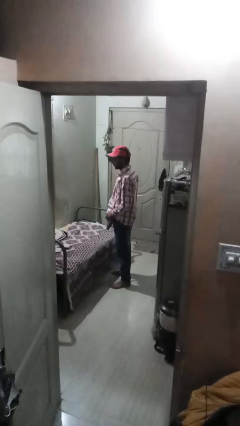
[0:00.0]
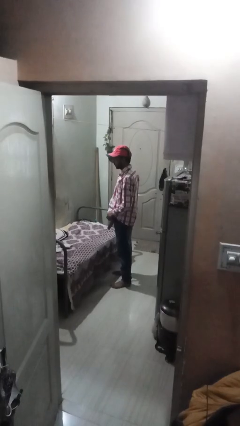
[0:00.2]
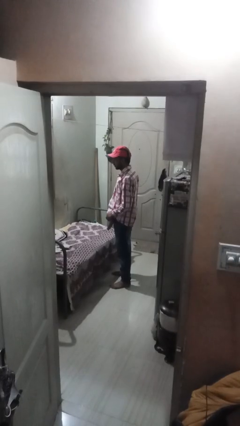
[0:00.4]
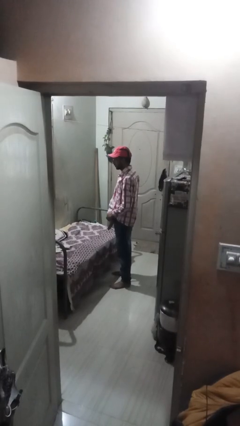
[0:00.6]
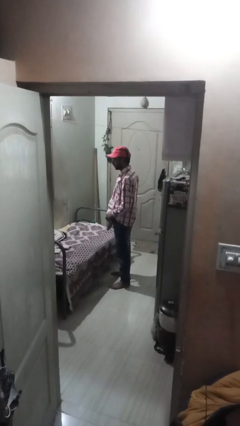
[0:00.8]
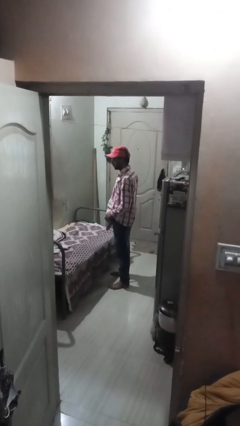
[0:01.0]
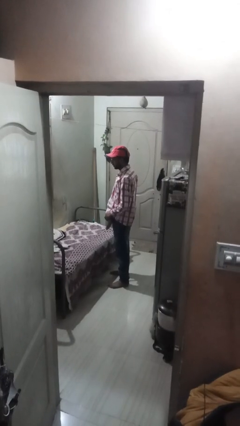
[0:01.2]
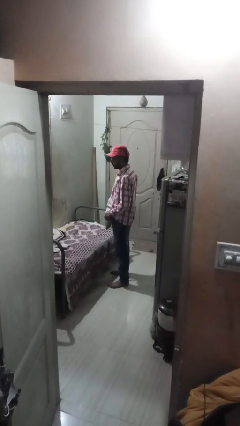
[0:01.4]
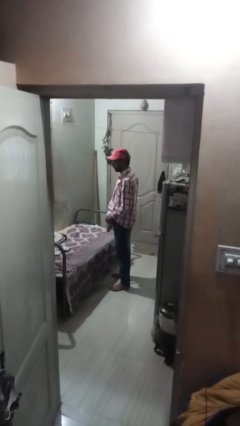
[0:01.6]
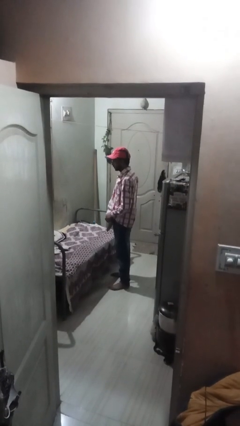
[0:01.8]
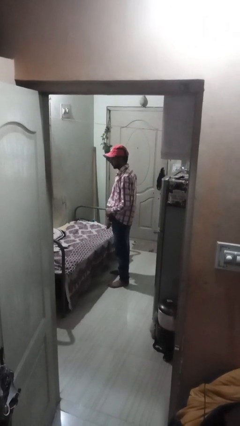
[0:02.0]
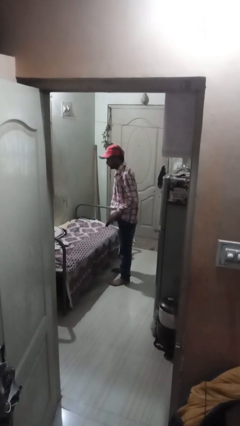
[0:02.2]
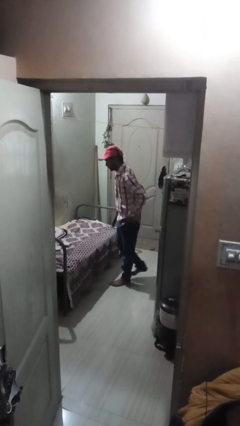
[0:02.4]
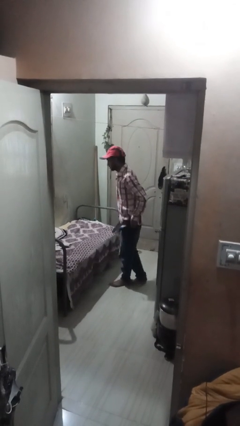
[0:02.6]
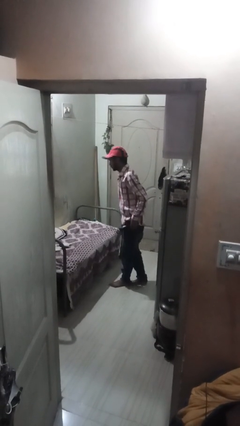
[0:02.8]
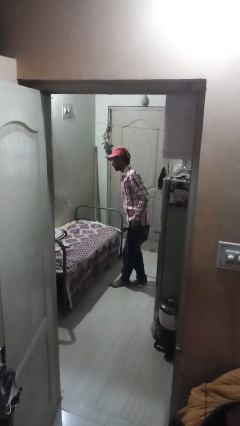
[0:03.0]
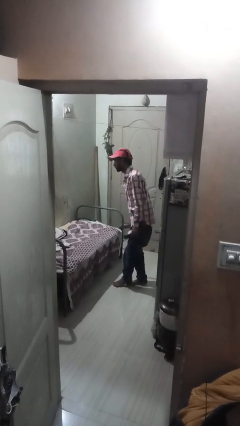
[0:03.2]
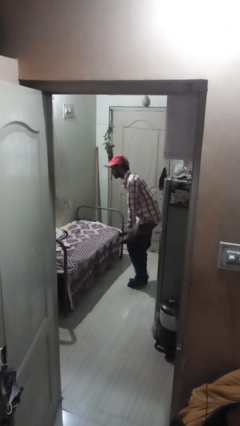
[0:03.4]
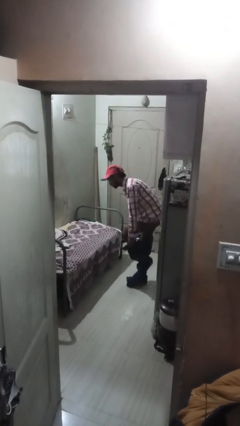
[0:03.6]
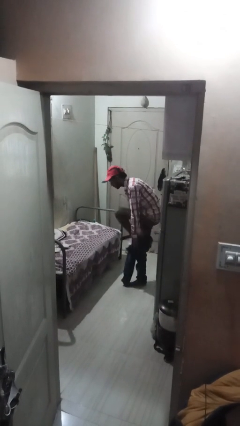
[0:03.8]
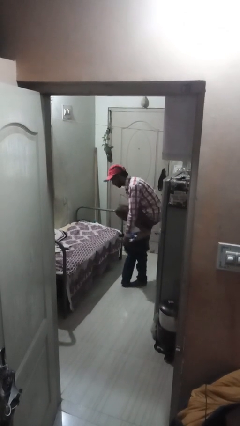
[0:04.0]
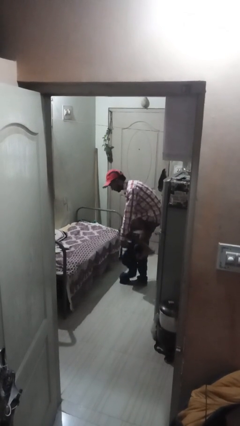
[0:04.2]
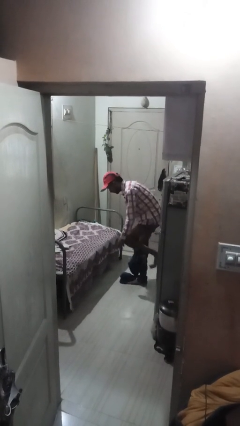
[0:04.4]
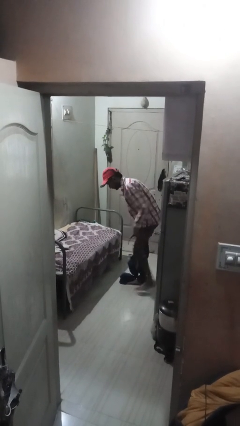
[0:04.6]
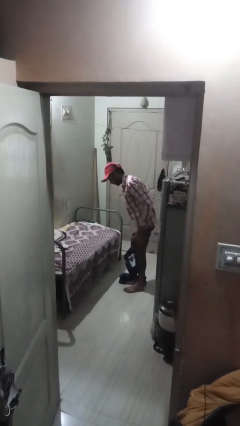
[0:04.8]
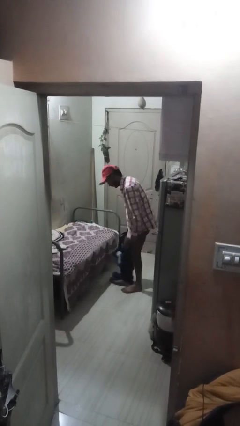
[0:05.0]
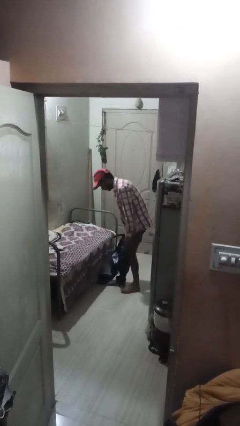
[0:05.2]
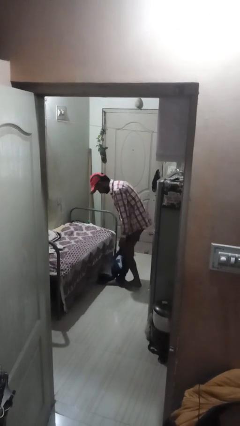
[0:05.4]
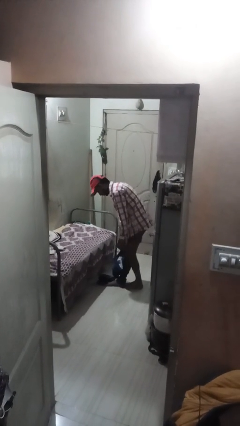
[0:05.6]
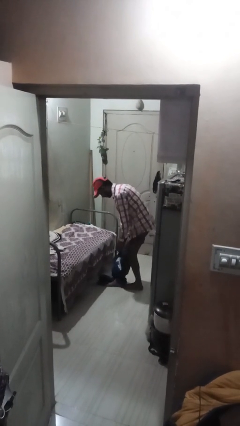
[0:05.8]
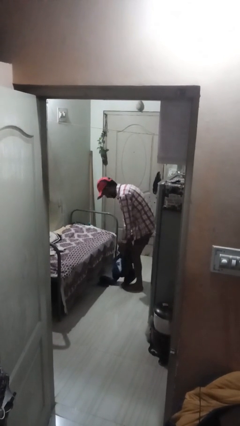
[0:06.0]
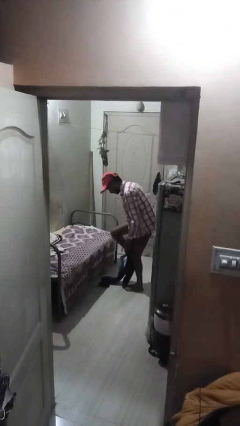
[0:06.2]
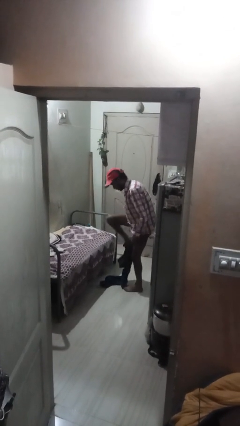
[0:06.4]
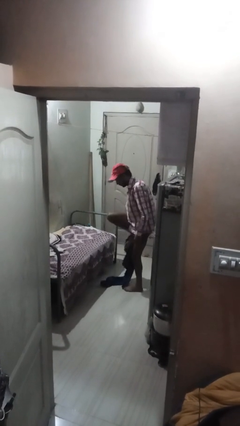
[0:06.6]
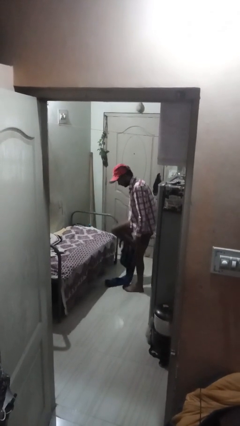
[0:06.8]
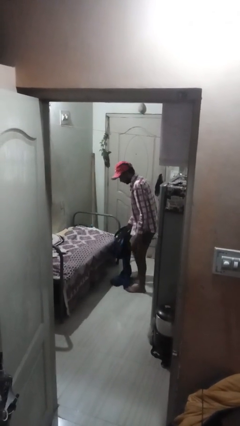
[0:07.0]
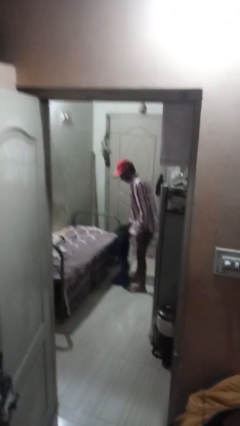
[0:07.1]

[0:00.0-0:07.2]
person takes off pants

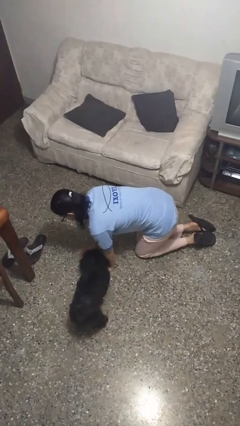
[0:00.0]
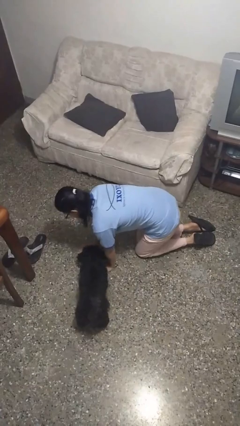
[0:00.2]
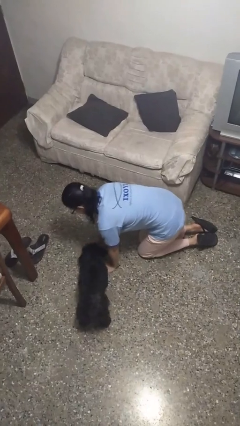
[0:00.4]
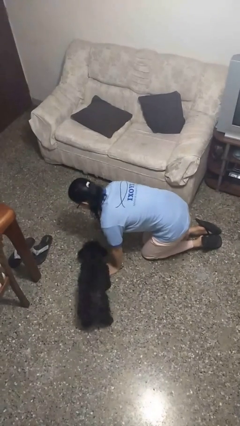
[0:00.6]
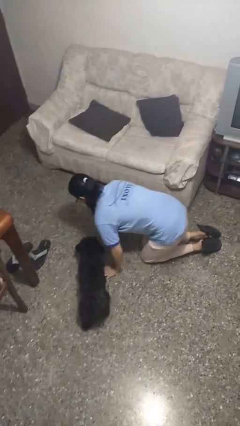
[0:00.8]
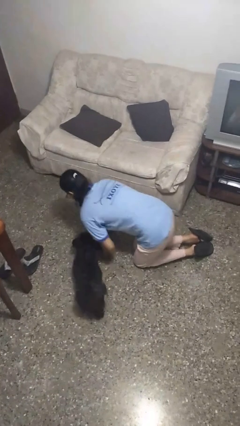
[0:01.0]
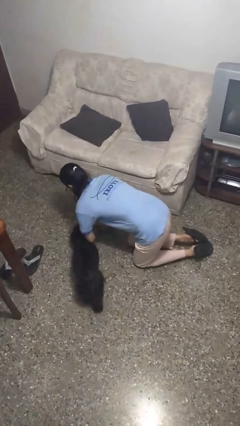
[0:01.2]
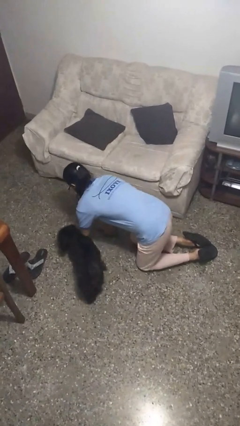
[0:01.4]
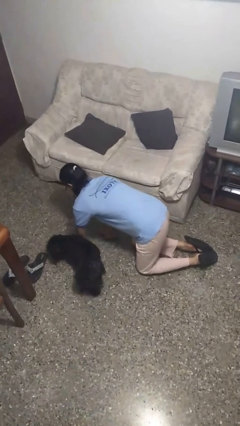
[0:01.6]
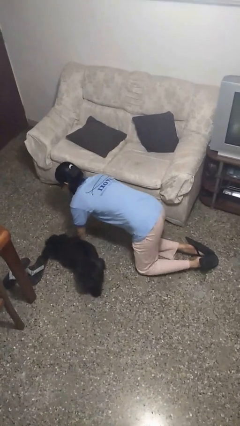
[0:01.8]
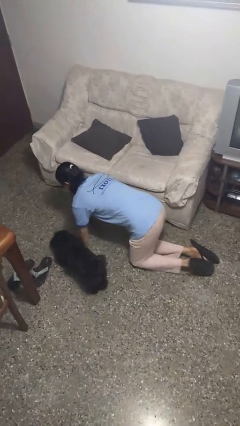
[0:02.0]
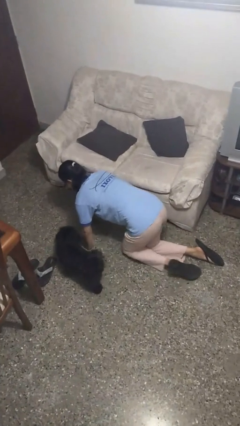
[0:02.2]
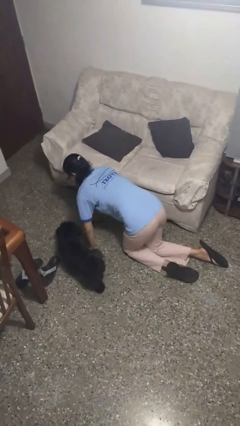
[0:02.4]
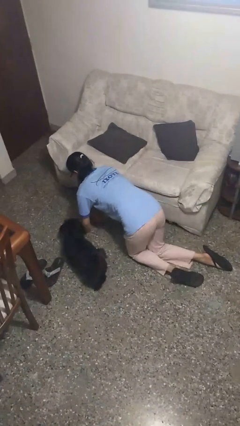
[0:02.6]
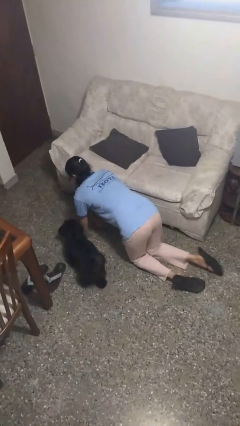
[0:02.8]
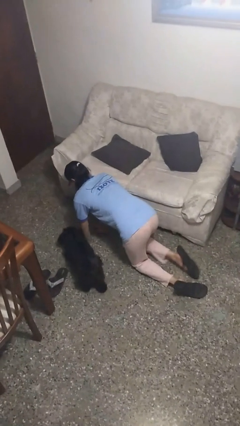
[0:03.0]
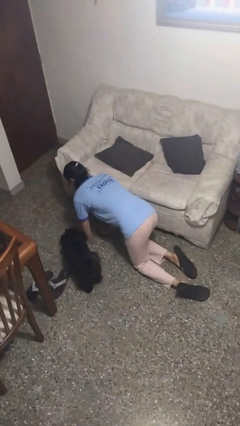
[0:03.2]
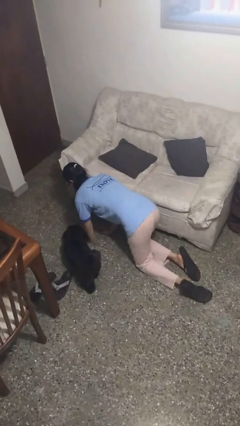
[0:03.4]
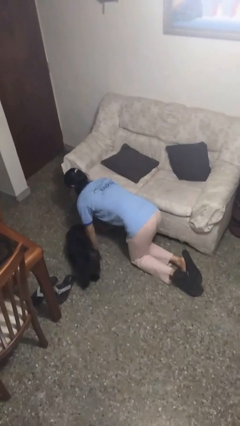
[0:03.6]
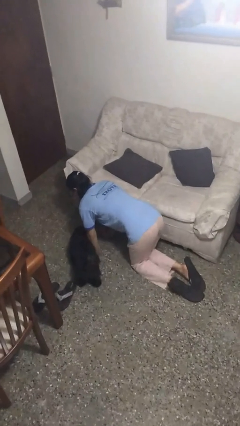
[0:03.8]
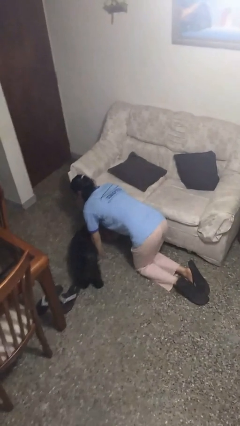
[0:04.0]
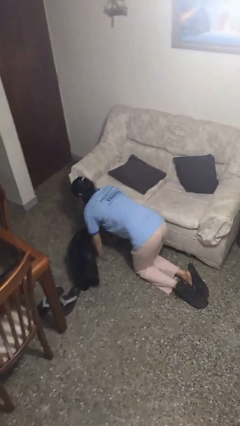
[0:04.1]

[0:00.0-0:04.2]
person crawls

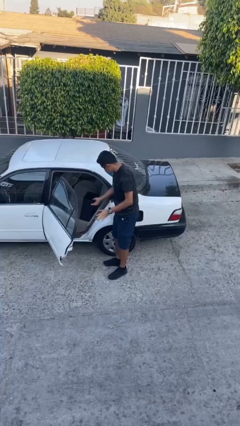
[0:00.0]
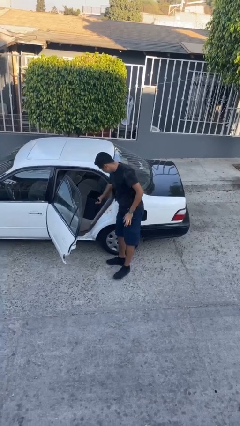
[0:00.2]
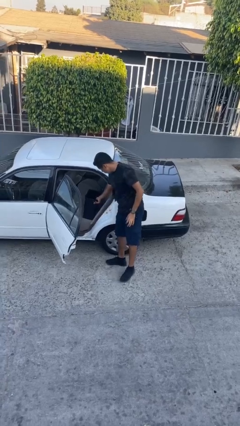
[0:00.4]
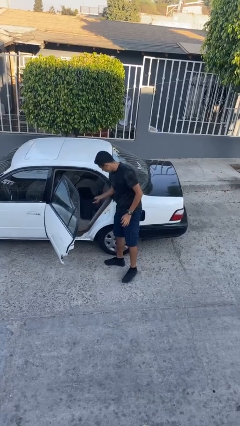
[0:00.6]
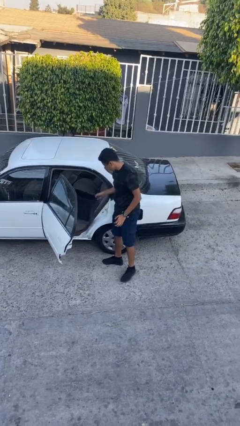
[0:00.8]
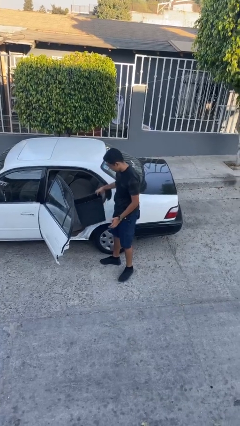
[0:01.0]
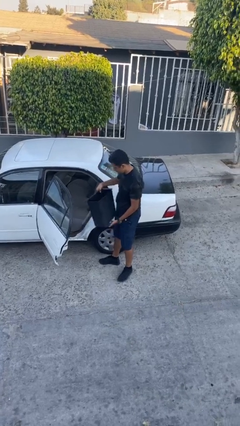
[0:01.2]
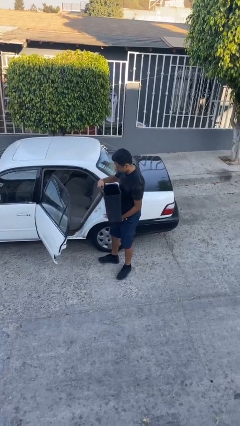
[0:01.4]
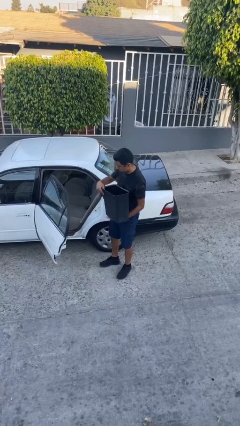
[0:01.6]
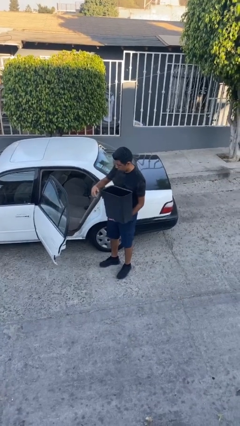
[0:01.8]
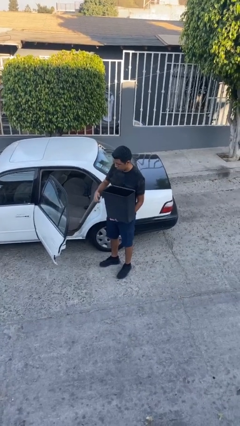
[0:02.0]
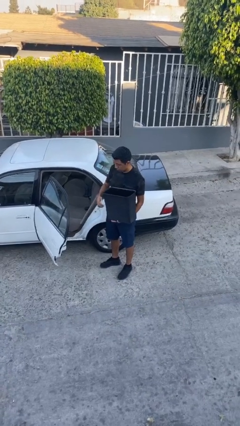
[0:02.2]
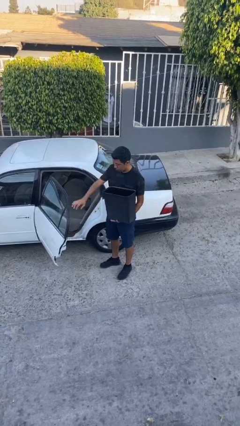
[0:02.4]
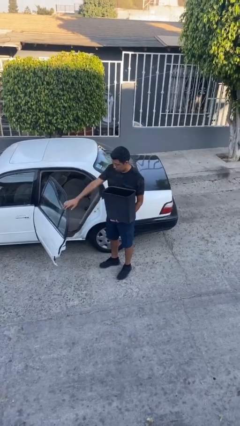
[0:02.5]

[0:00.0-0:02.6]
person unloads car

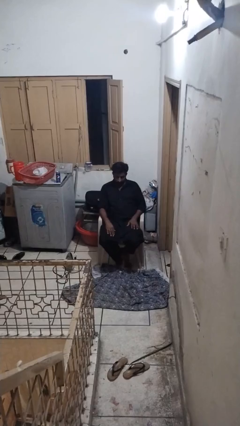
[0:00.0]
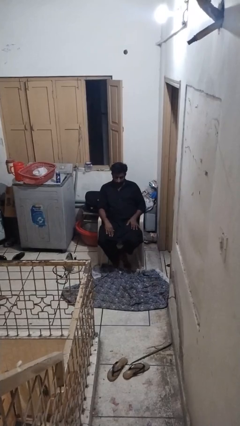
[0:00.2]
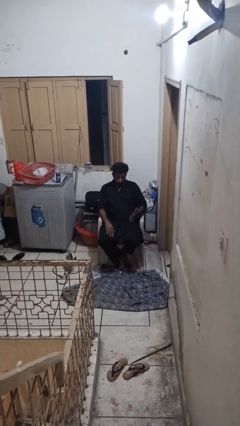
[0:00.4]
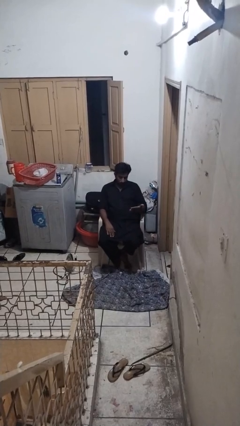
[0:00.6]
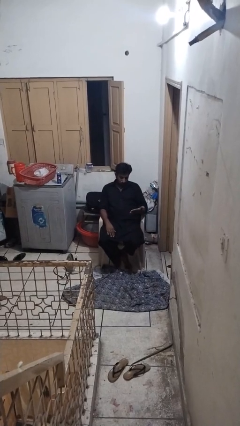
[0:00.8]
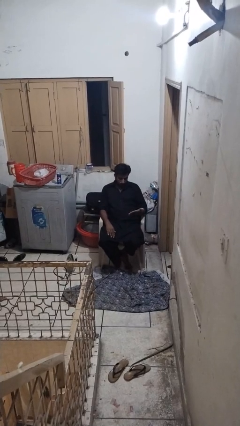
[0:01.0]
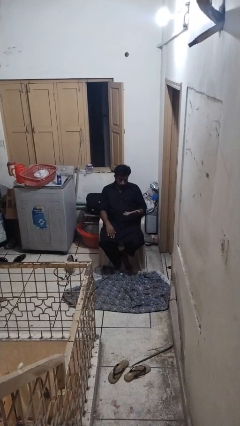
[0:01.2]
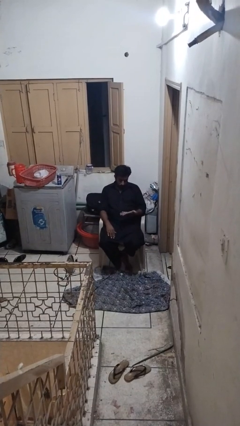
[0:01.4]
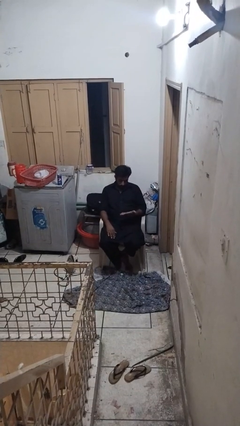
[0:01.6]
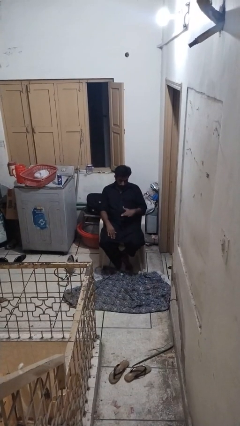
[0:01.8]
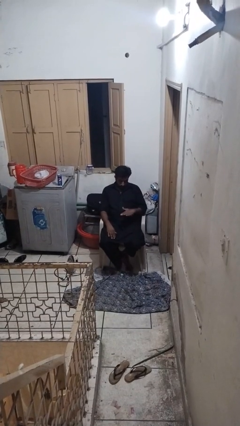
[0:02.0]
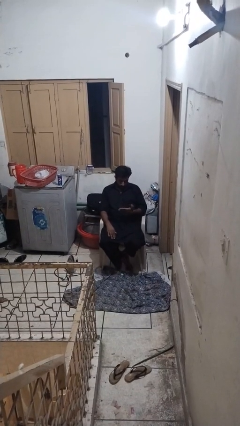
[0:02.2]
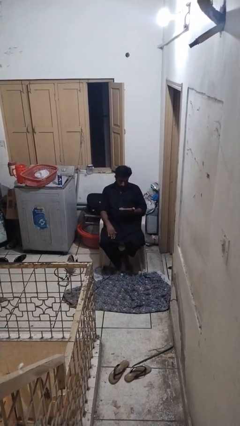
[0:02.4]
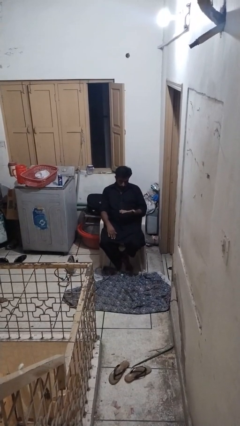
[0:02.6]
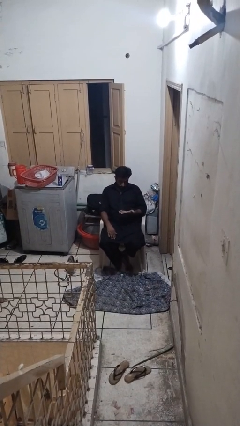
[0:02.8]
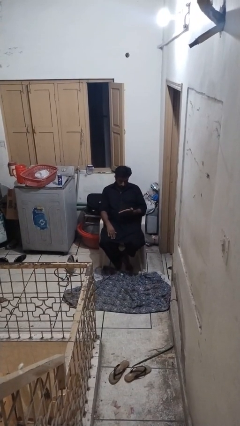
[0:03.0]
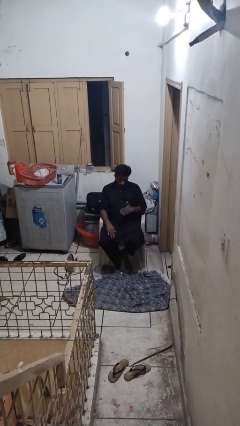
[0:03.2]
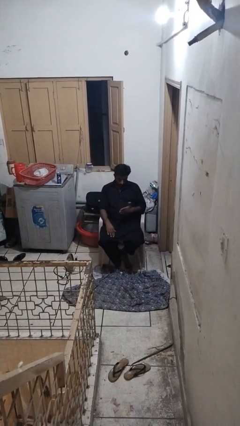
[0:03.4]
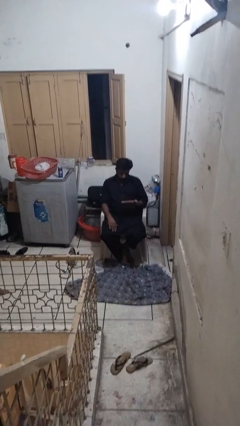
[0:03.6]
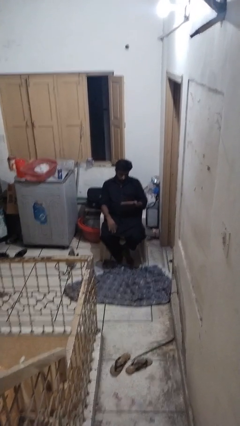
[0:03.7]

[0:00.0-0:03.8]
person looks at hands in lap
